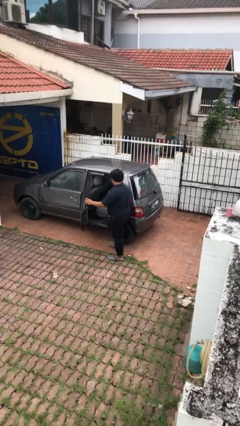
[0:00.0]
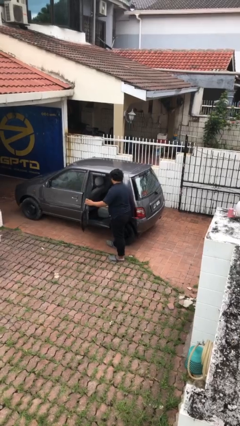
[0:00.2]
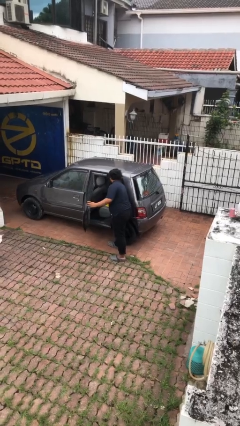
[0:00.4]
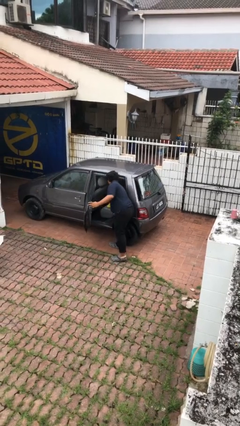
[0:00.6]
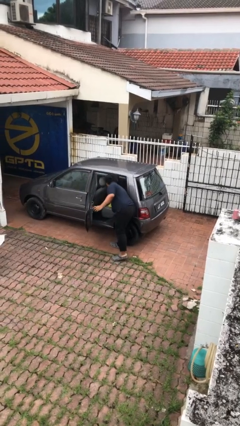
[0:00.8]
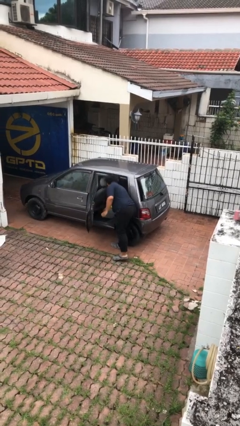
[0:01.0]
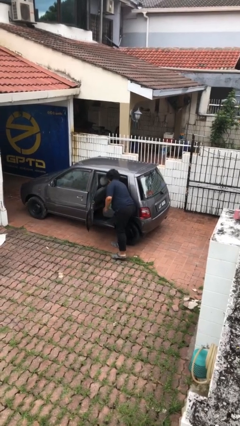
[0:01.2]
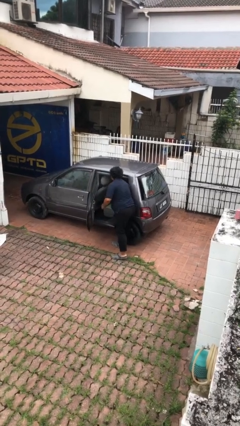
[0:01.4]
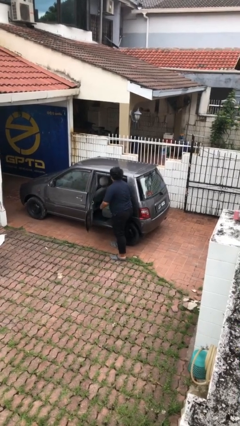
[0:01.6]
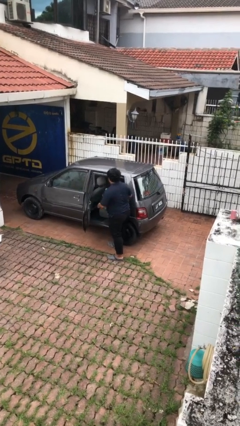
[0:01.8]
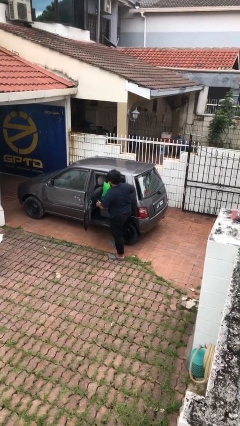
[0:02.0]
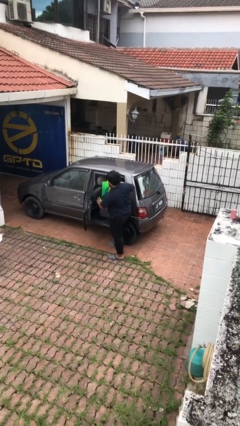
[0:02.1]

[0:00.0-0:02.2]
person unloads car

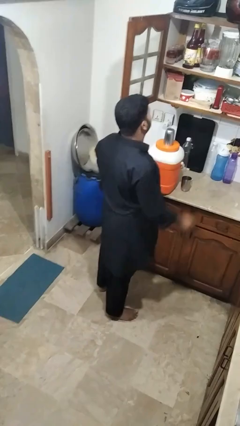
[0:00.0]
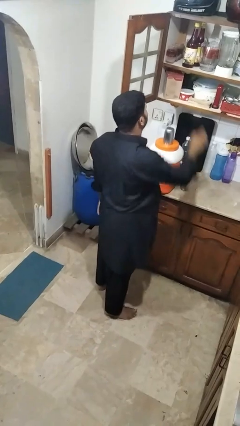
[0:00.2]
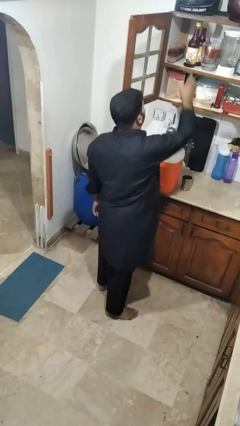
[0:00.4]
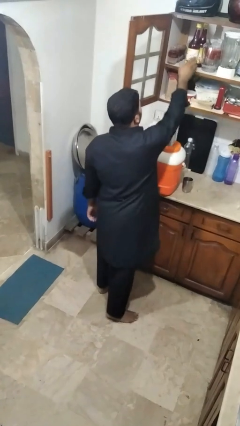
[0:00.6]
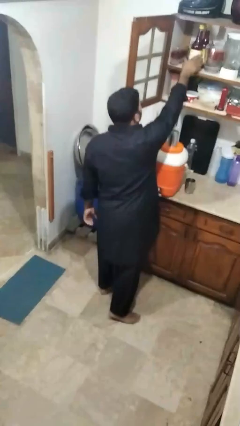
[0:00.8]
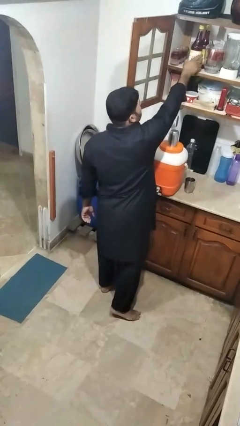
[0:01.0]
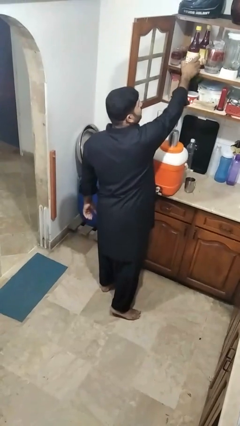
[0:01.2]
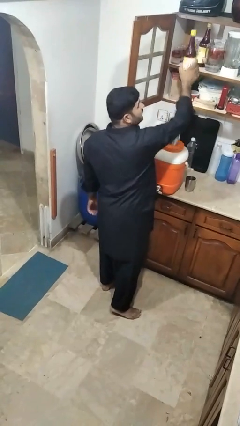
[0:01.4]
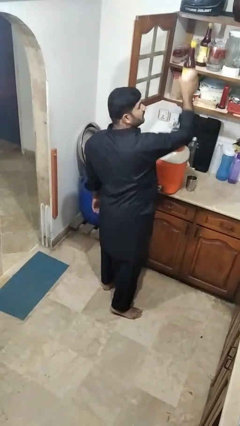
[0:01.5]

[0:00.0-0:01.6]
person picks up object from cabinet

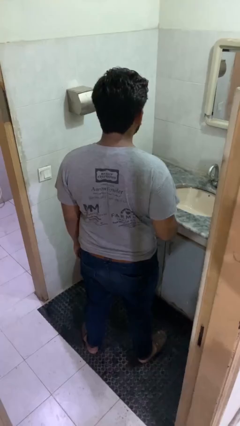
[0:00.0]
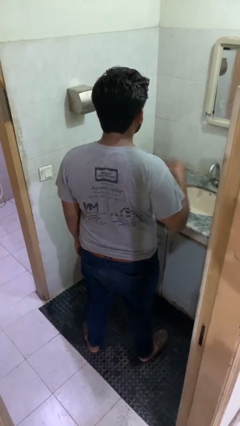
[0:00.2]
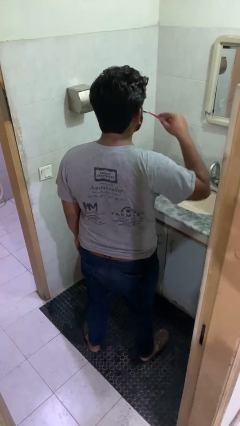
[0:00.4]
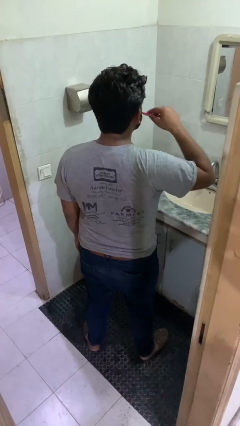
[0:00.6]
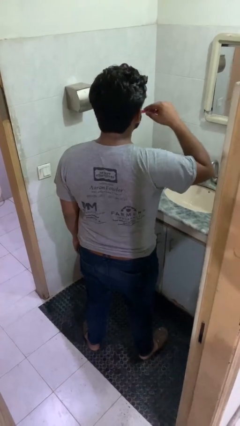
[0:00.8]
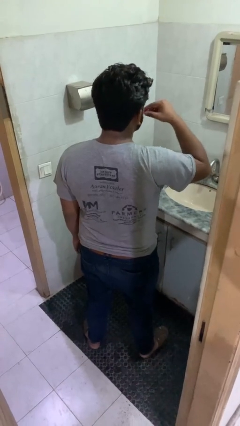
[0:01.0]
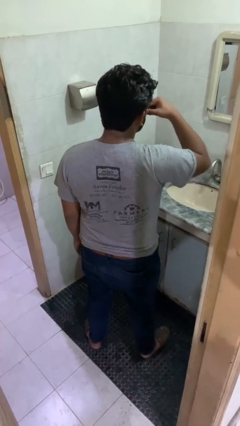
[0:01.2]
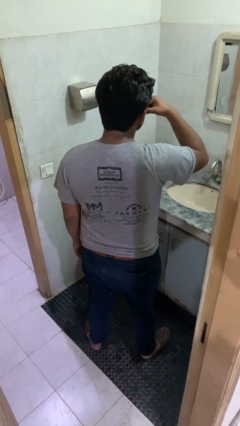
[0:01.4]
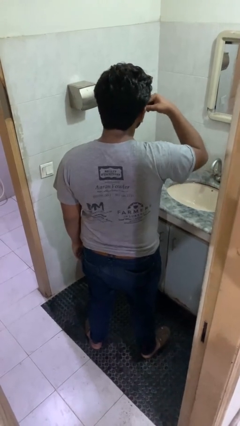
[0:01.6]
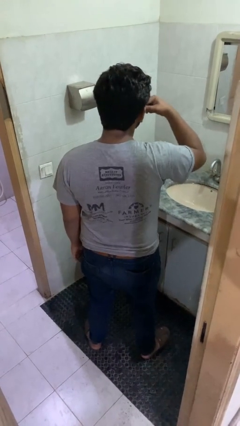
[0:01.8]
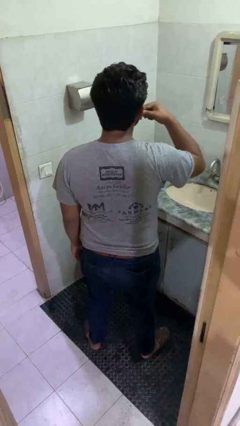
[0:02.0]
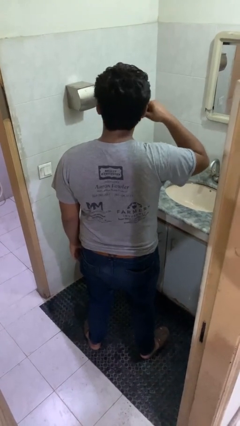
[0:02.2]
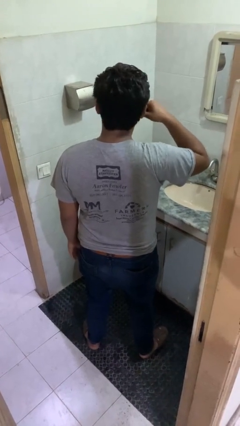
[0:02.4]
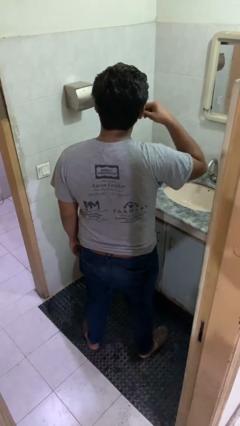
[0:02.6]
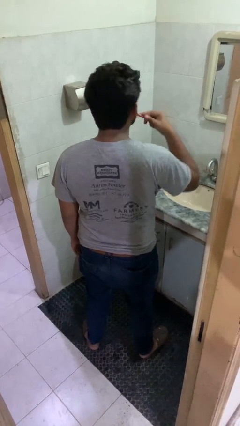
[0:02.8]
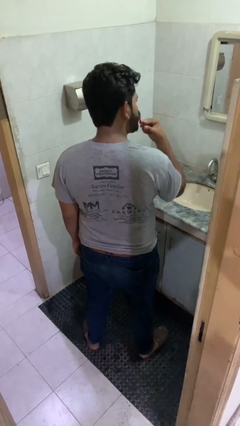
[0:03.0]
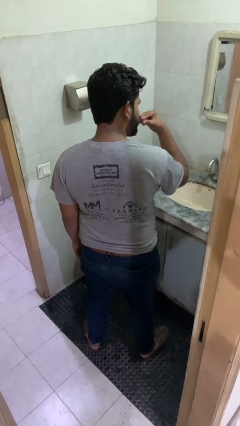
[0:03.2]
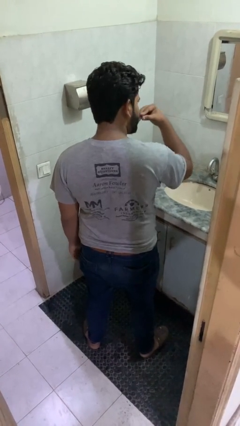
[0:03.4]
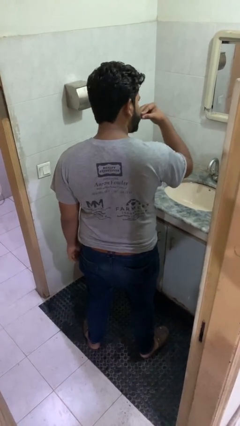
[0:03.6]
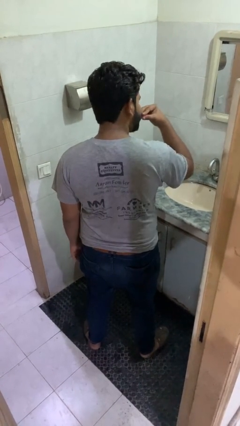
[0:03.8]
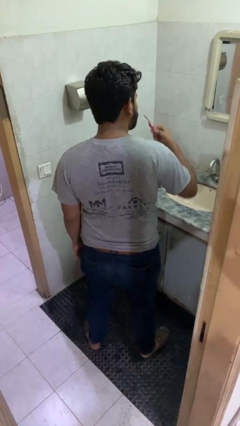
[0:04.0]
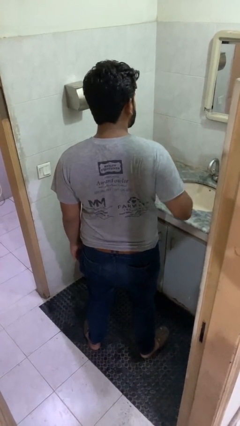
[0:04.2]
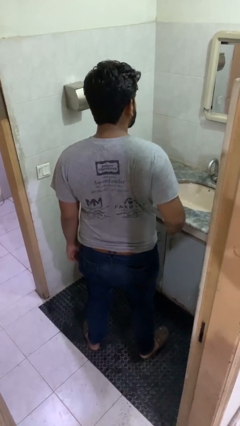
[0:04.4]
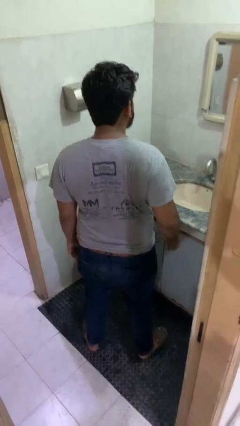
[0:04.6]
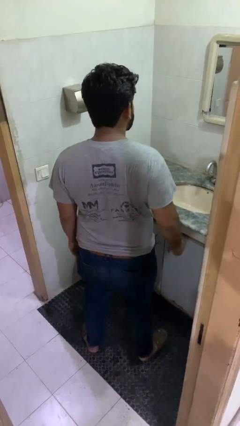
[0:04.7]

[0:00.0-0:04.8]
person brushes teeth

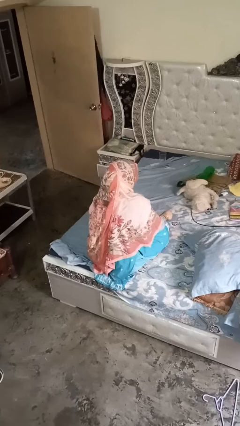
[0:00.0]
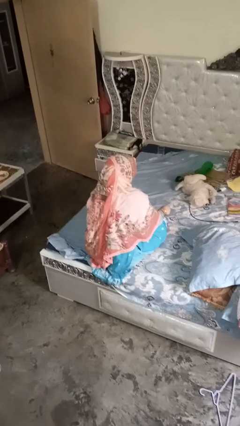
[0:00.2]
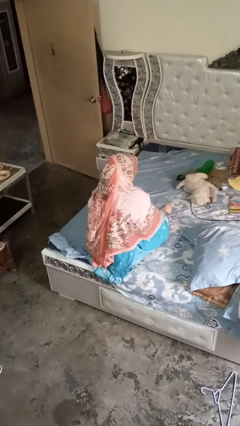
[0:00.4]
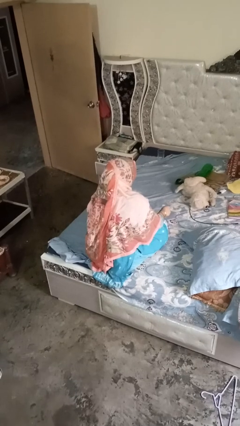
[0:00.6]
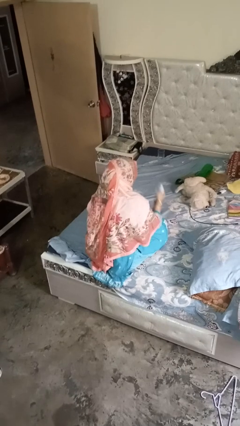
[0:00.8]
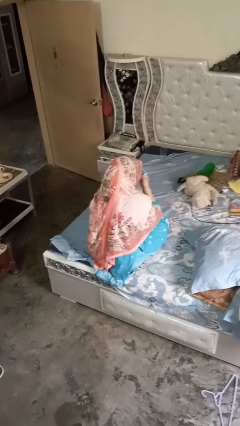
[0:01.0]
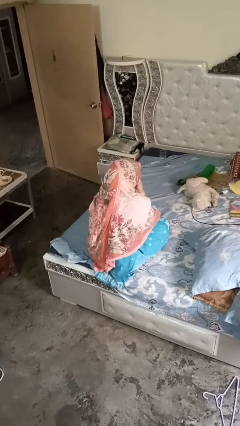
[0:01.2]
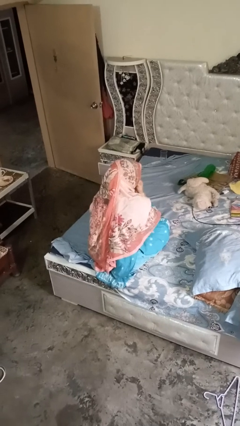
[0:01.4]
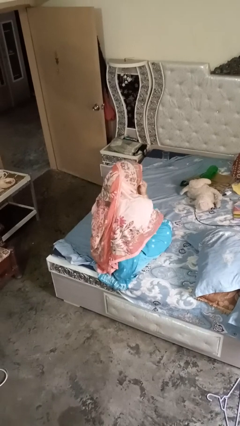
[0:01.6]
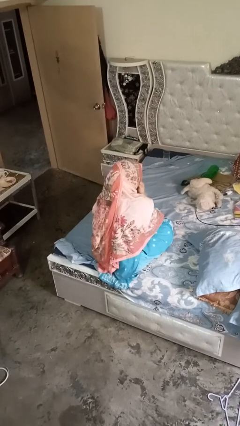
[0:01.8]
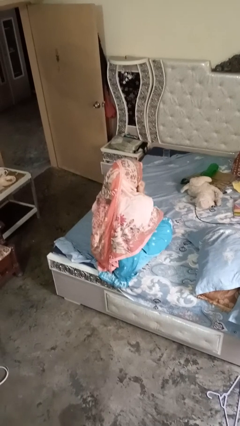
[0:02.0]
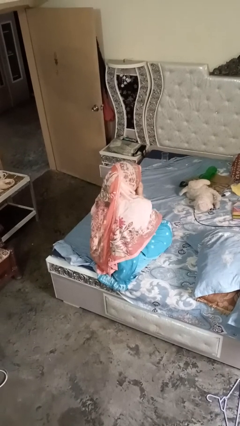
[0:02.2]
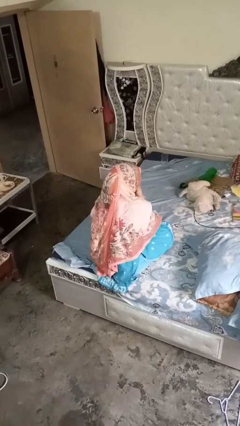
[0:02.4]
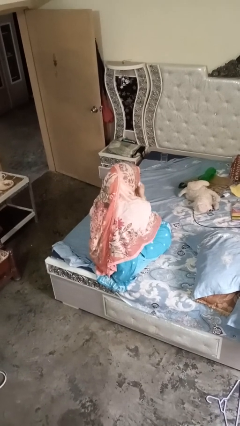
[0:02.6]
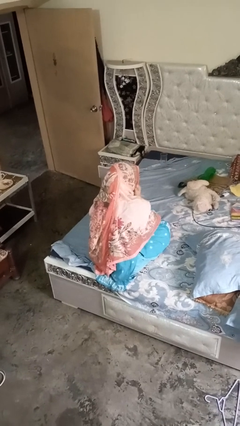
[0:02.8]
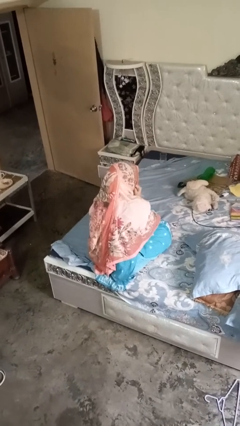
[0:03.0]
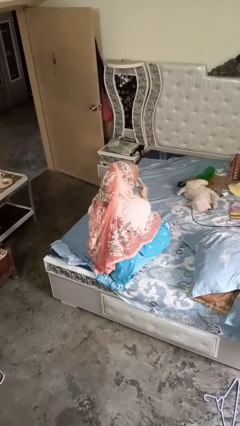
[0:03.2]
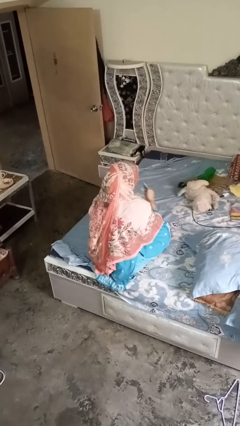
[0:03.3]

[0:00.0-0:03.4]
person blows nose

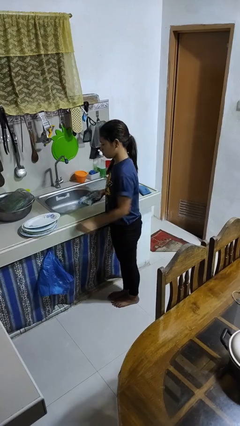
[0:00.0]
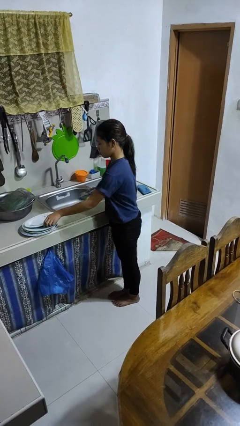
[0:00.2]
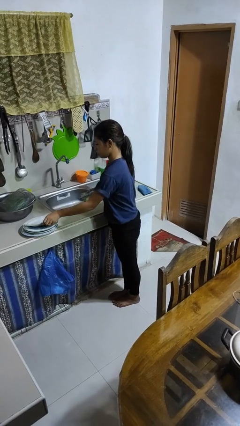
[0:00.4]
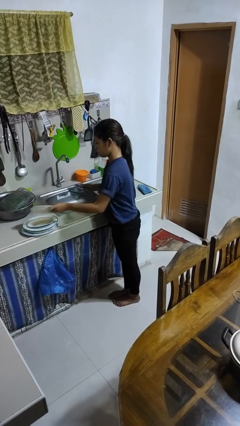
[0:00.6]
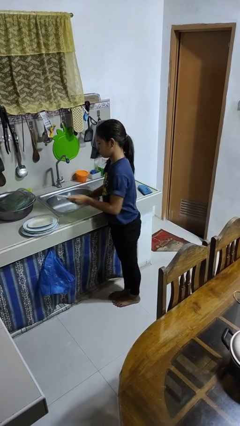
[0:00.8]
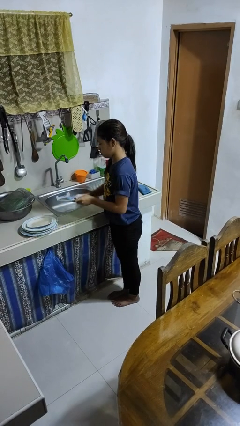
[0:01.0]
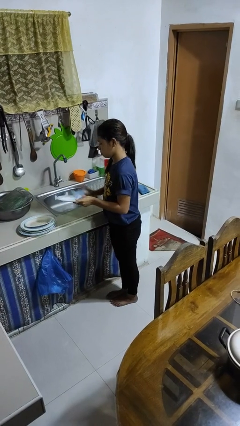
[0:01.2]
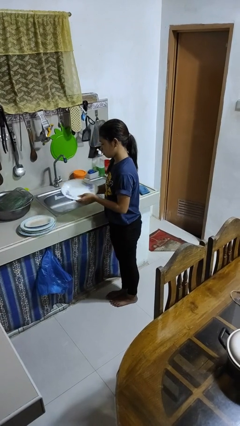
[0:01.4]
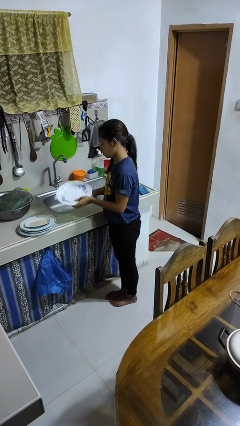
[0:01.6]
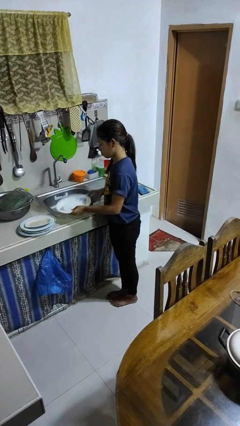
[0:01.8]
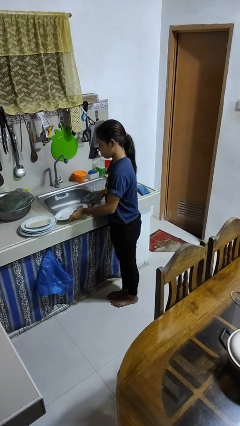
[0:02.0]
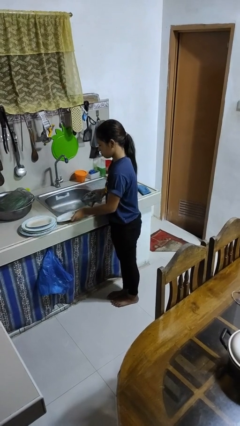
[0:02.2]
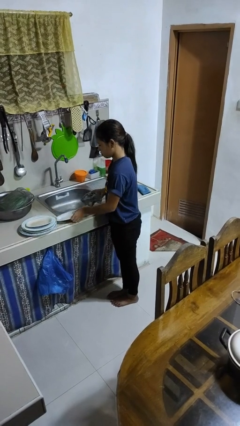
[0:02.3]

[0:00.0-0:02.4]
person dries dish

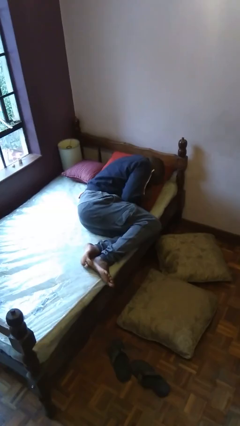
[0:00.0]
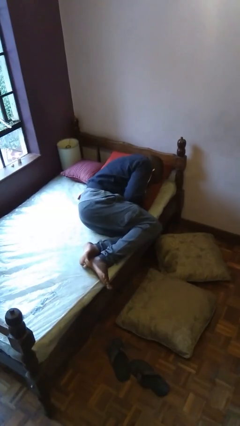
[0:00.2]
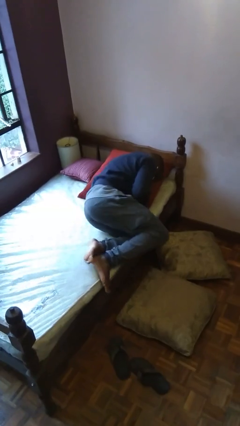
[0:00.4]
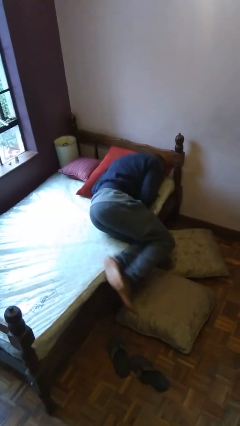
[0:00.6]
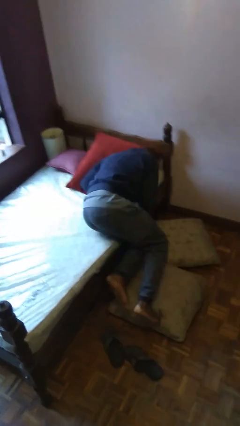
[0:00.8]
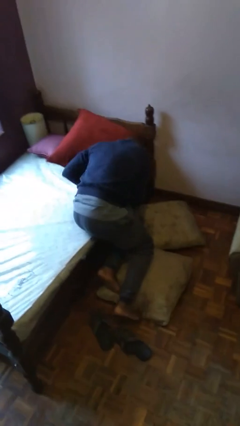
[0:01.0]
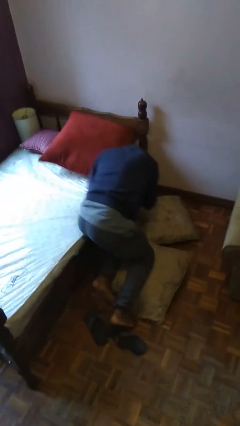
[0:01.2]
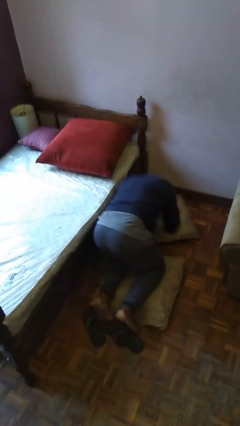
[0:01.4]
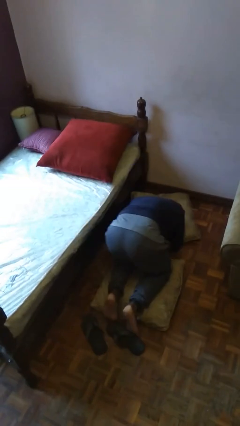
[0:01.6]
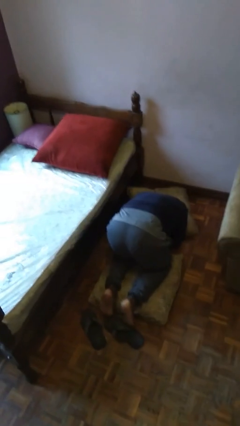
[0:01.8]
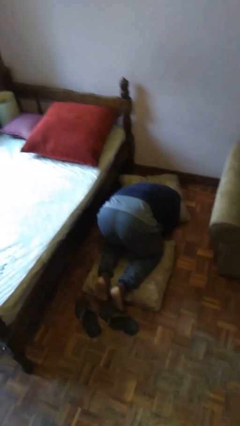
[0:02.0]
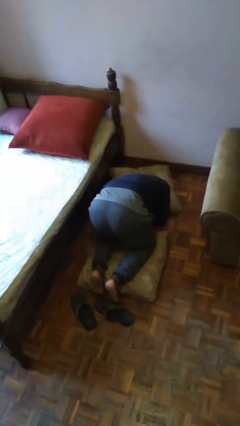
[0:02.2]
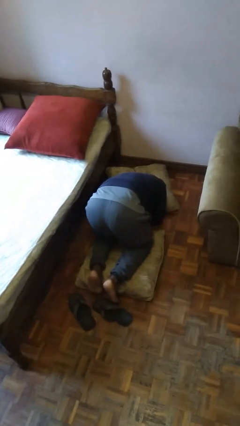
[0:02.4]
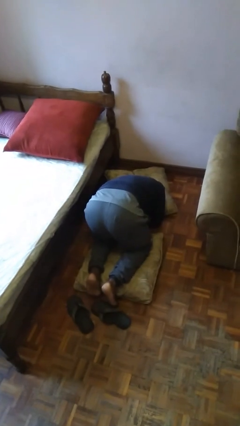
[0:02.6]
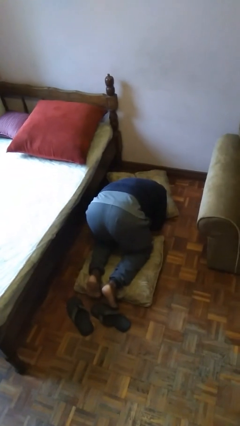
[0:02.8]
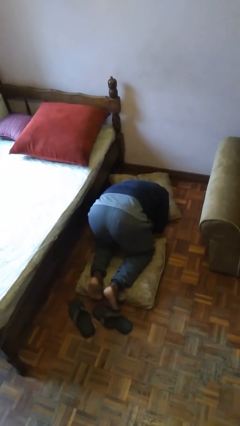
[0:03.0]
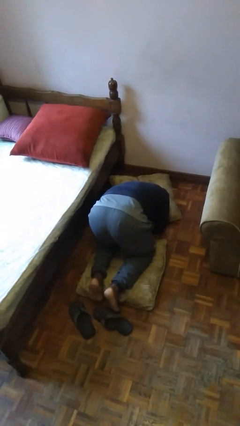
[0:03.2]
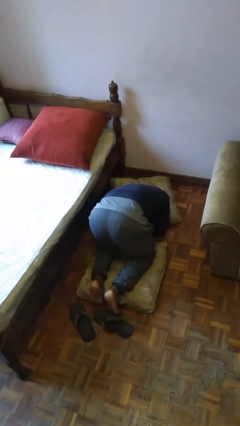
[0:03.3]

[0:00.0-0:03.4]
person falls from bed
